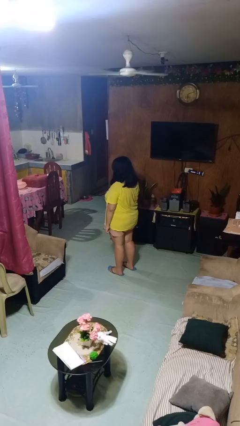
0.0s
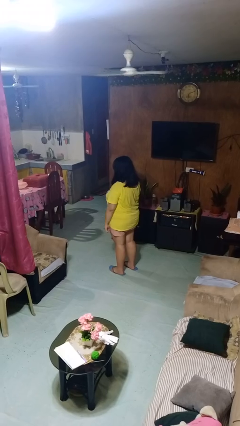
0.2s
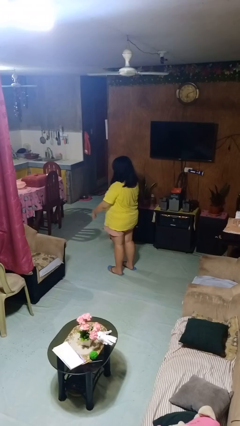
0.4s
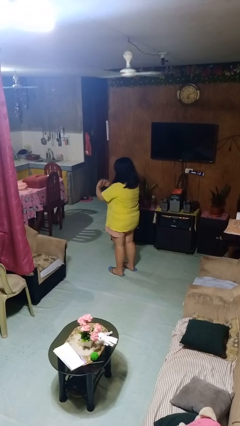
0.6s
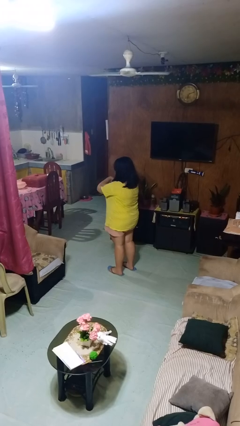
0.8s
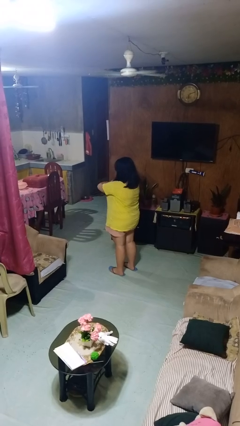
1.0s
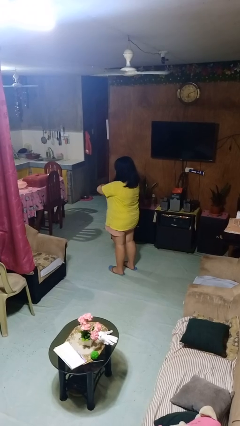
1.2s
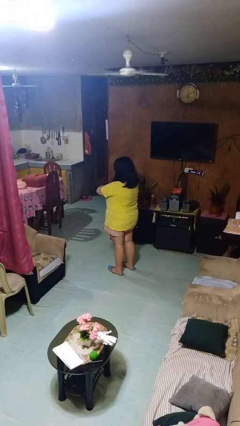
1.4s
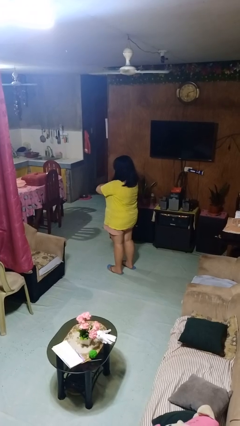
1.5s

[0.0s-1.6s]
person crosses arms

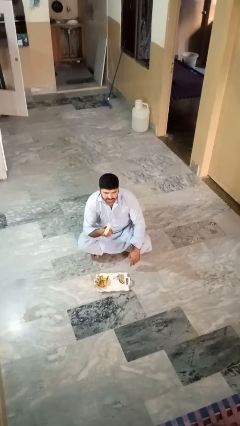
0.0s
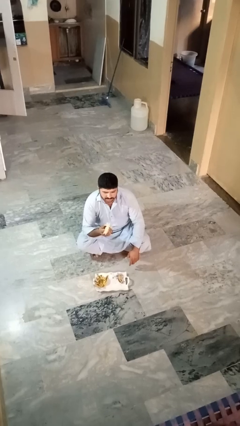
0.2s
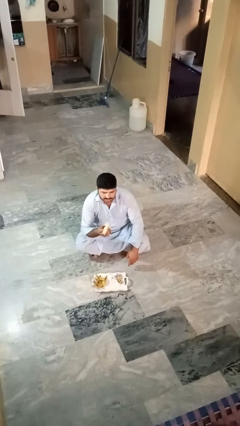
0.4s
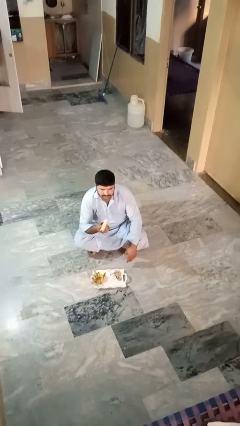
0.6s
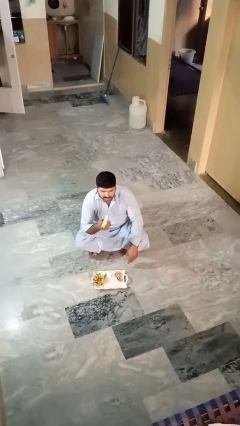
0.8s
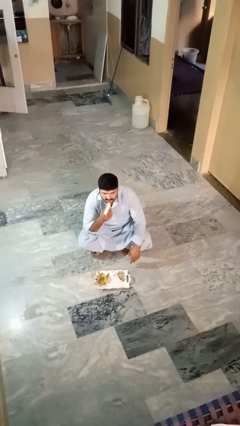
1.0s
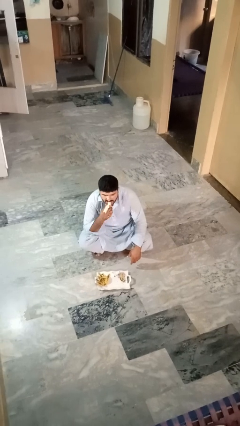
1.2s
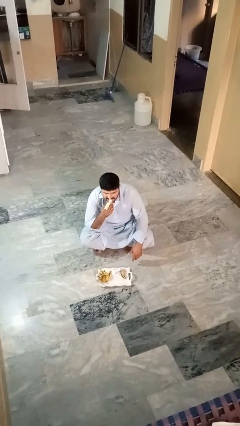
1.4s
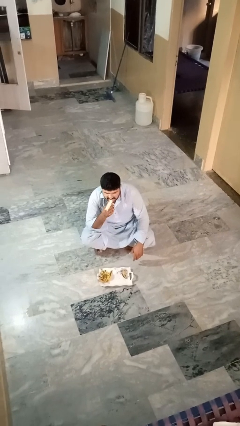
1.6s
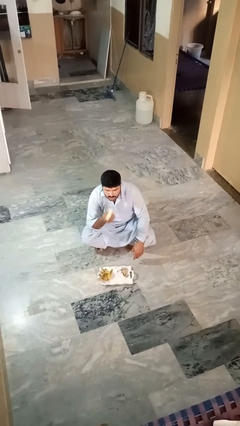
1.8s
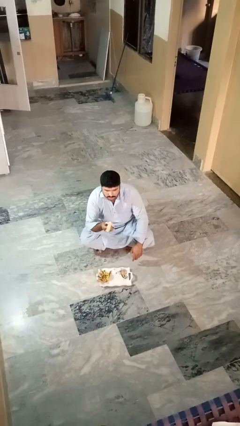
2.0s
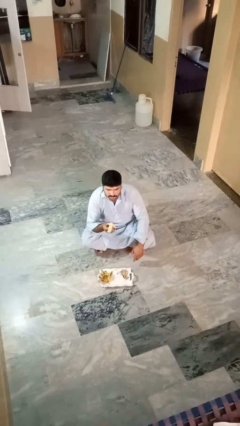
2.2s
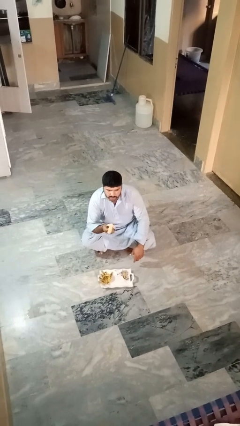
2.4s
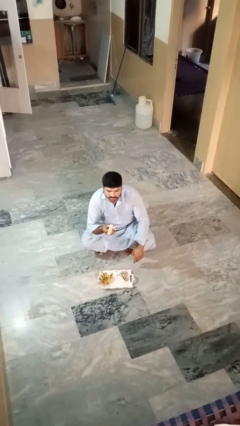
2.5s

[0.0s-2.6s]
person eats banana

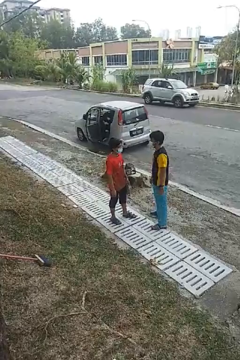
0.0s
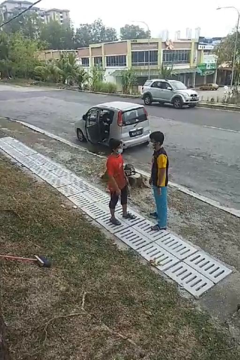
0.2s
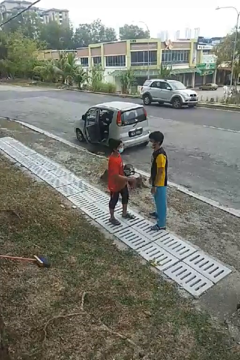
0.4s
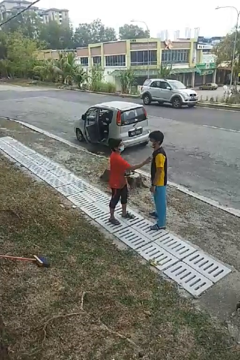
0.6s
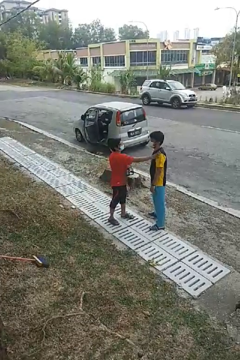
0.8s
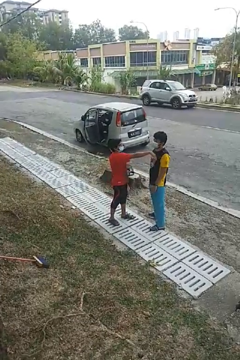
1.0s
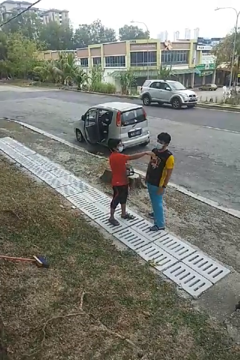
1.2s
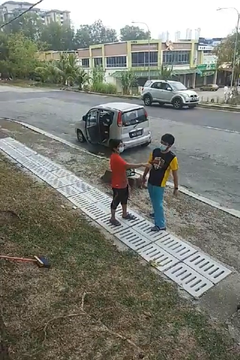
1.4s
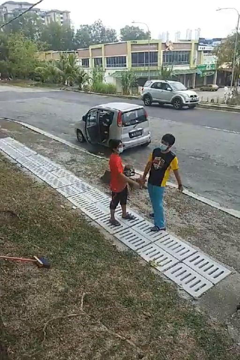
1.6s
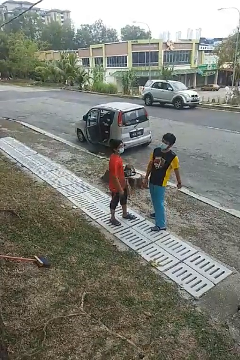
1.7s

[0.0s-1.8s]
person shoves person

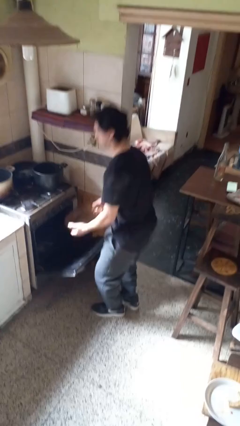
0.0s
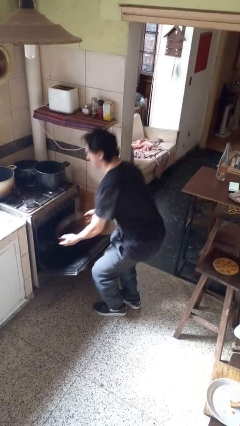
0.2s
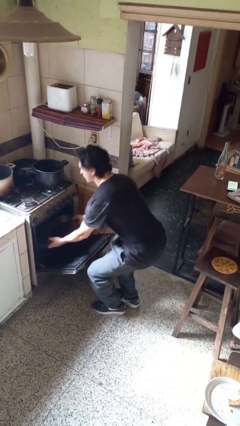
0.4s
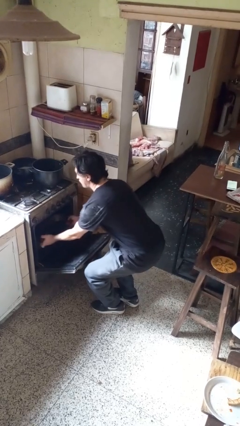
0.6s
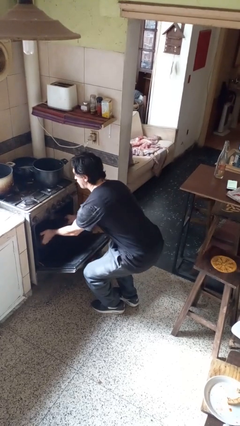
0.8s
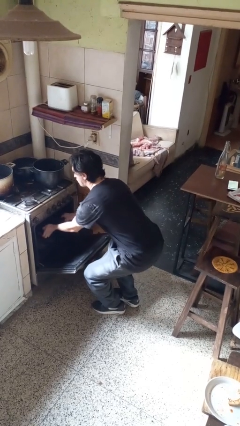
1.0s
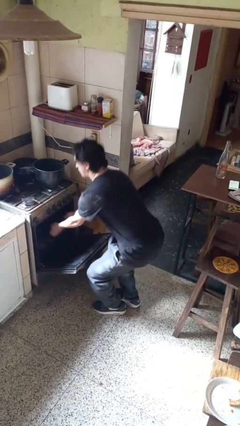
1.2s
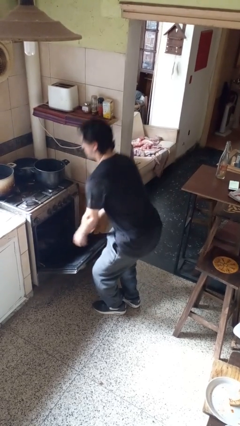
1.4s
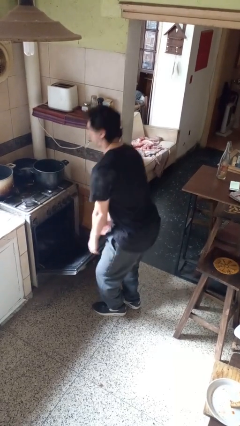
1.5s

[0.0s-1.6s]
person puts object into oven

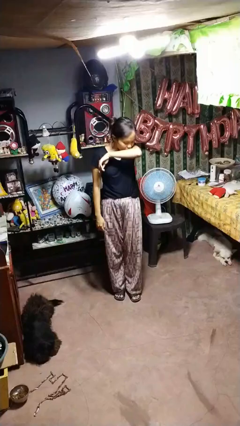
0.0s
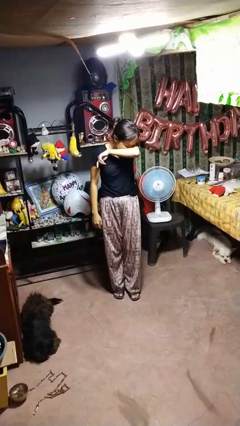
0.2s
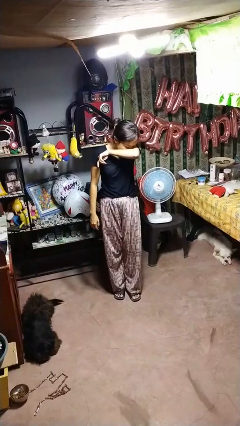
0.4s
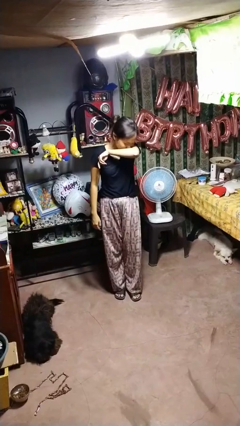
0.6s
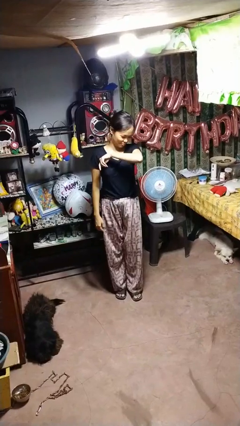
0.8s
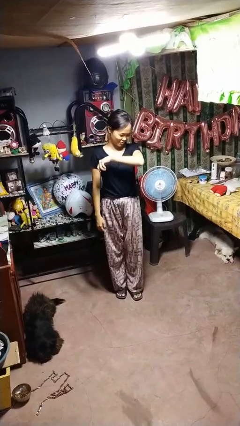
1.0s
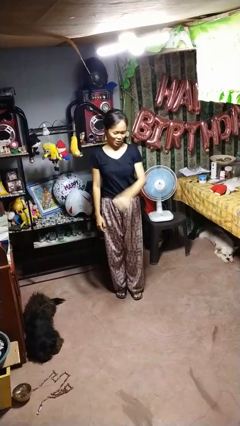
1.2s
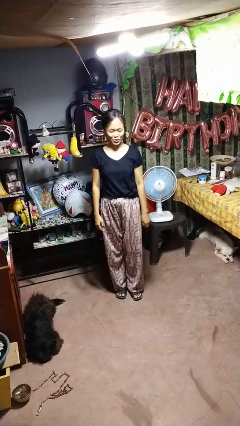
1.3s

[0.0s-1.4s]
person sneezes into arm

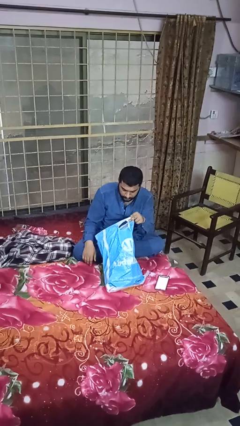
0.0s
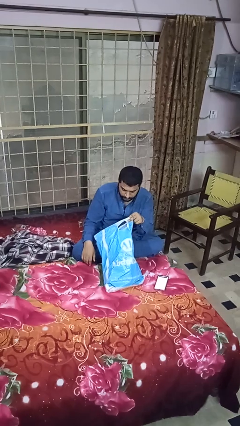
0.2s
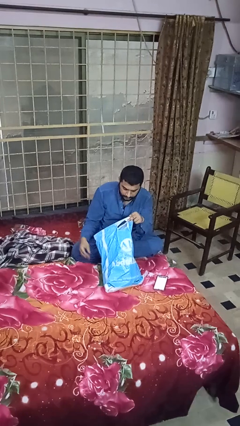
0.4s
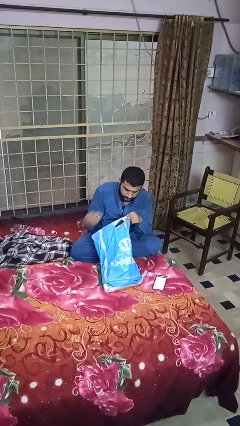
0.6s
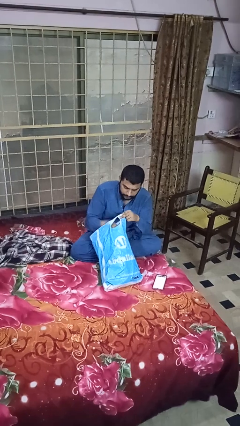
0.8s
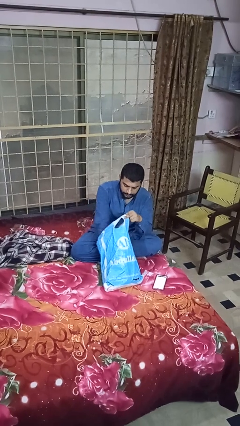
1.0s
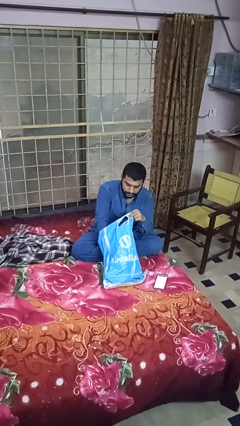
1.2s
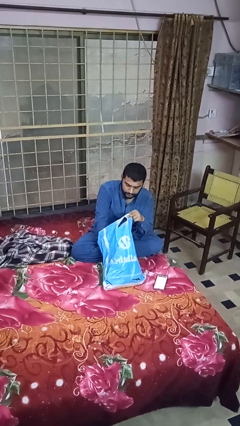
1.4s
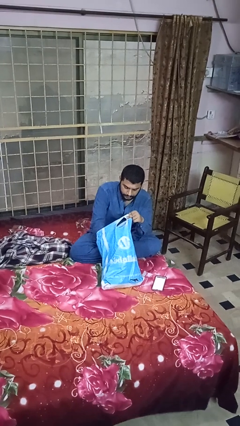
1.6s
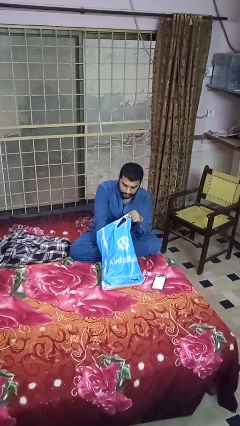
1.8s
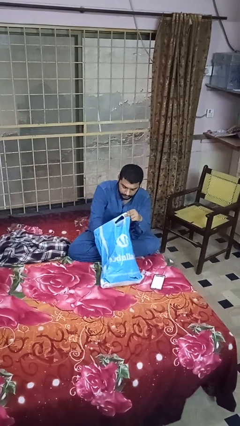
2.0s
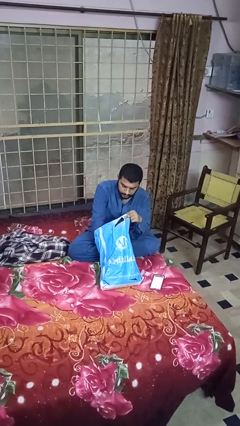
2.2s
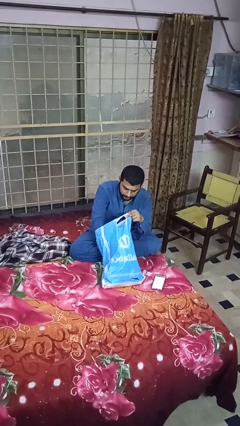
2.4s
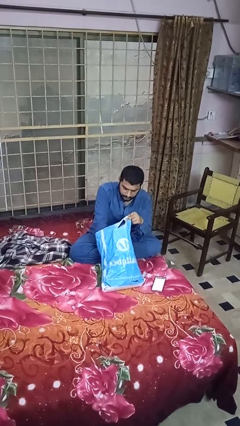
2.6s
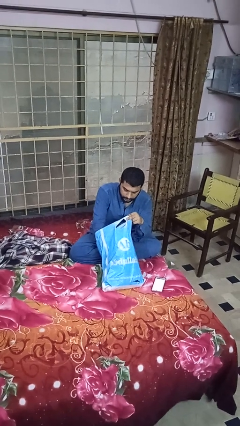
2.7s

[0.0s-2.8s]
person searches in bag

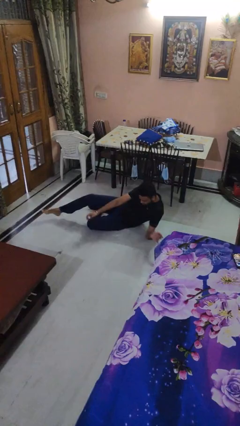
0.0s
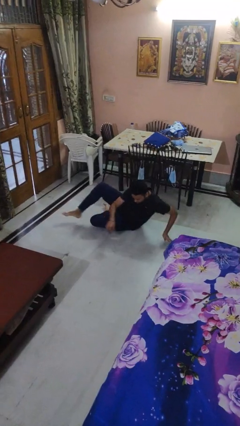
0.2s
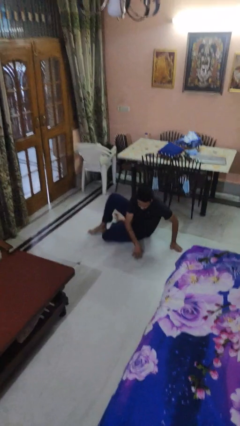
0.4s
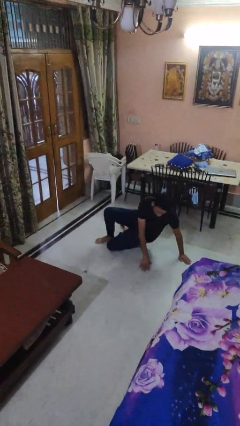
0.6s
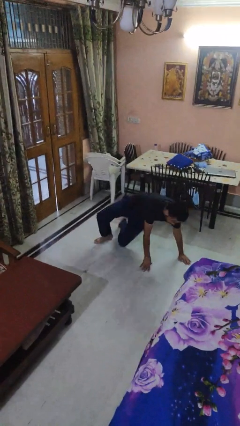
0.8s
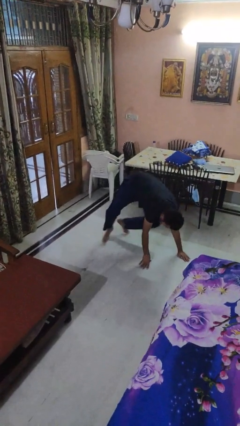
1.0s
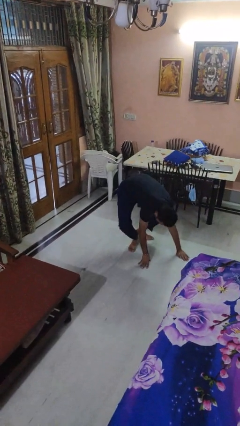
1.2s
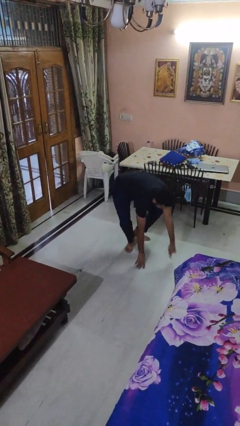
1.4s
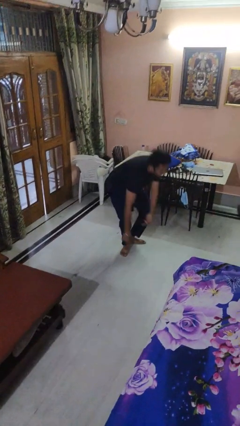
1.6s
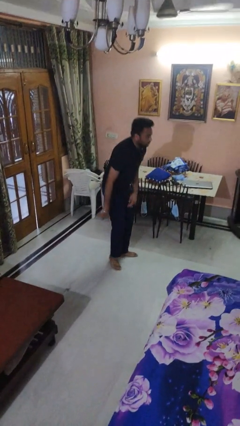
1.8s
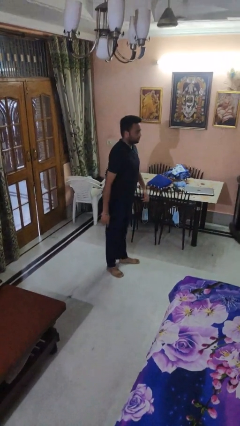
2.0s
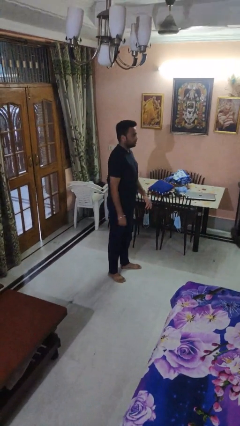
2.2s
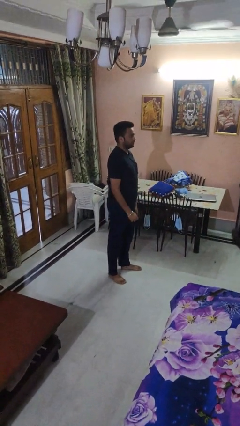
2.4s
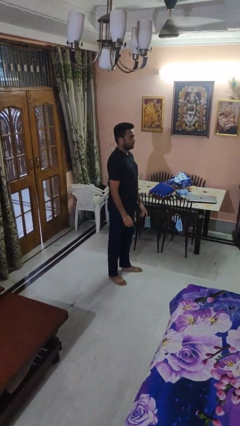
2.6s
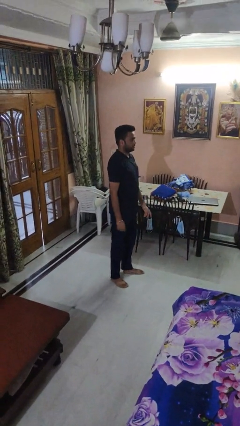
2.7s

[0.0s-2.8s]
person stands up from floor

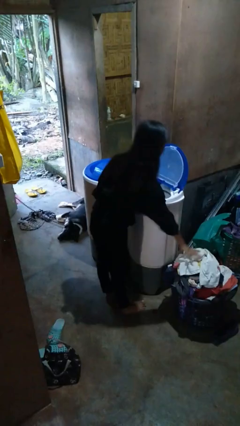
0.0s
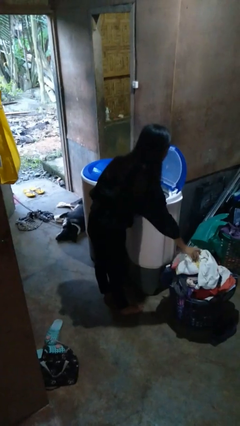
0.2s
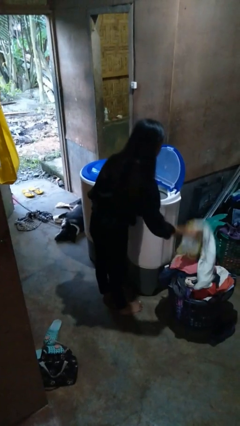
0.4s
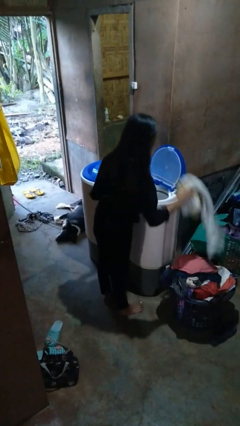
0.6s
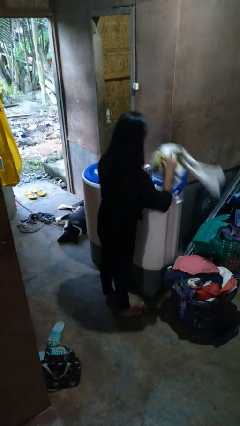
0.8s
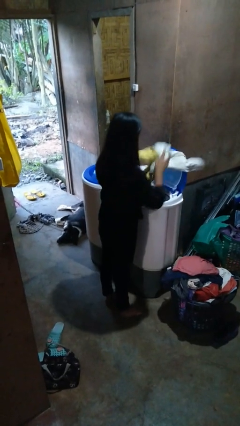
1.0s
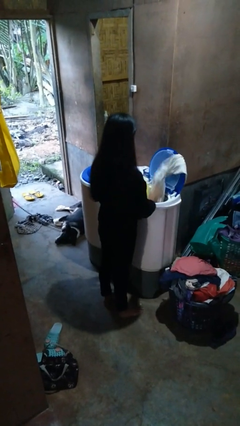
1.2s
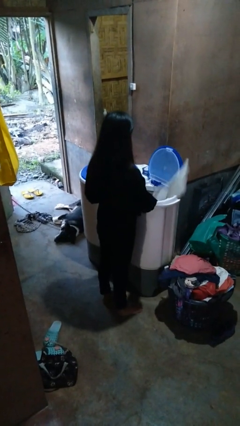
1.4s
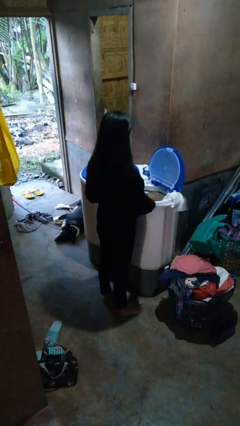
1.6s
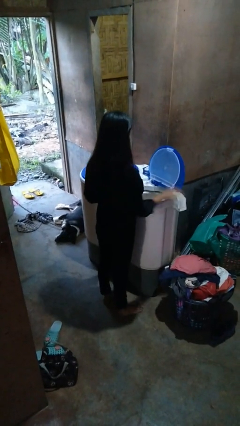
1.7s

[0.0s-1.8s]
person loads dryer

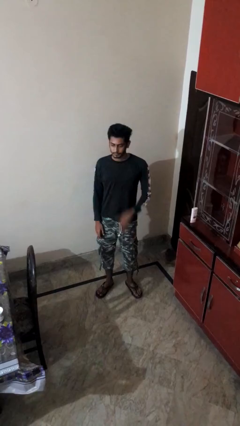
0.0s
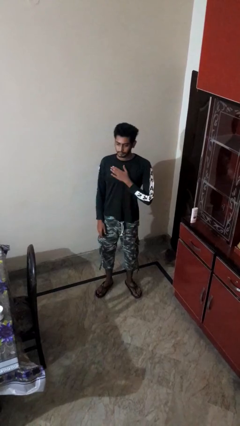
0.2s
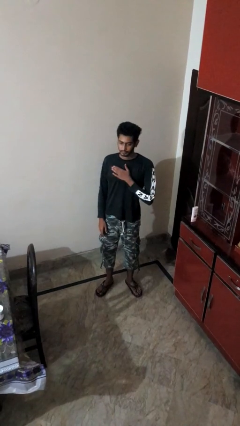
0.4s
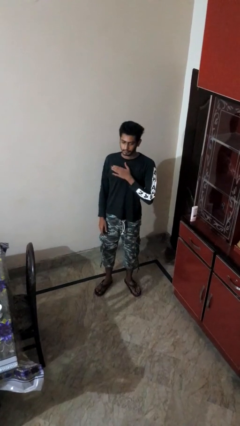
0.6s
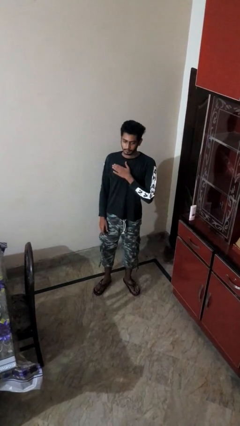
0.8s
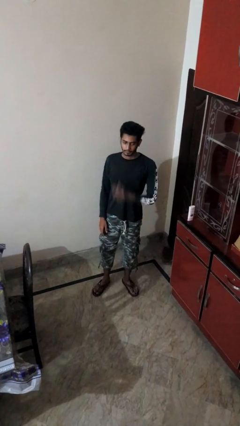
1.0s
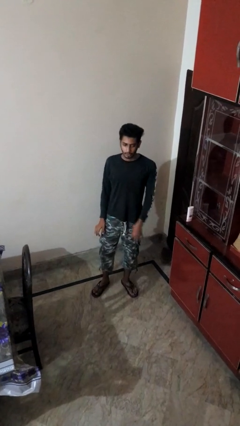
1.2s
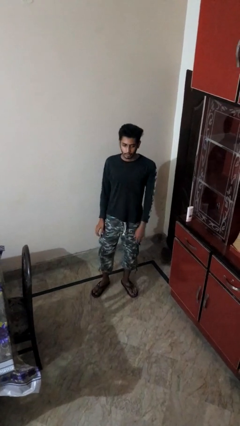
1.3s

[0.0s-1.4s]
person drums on chest
